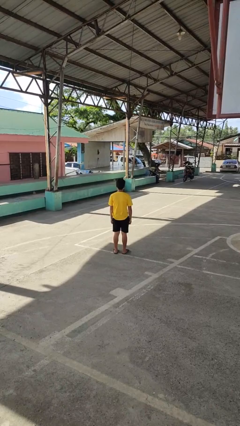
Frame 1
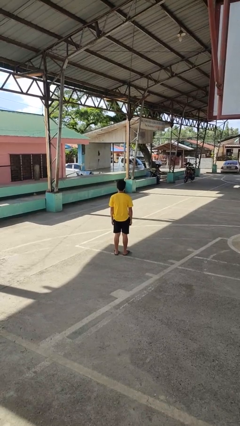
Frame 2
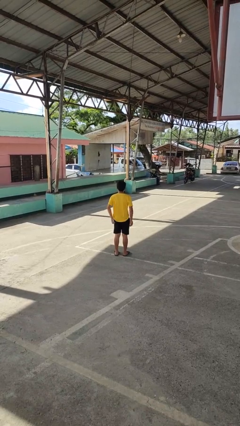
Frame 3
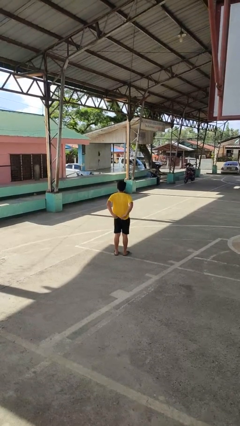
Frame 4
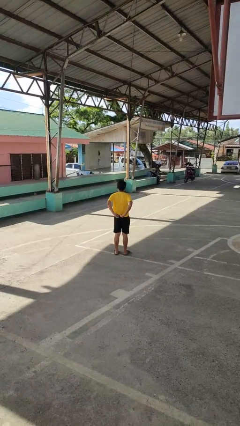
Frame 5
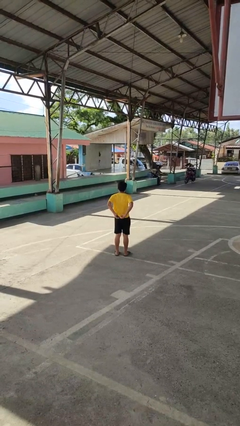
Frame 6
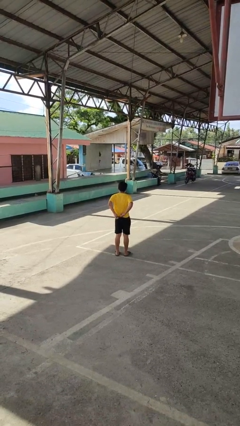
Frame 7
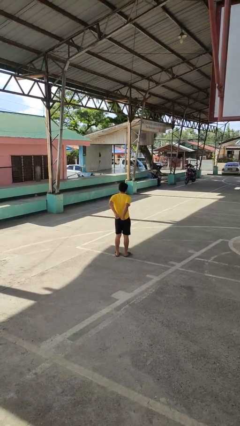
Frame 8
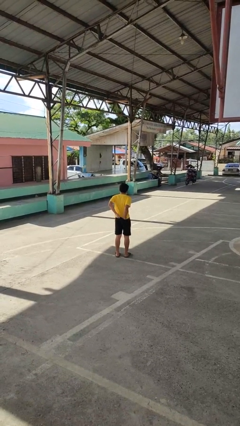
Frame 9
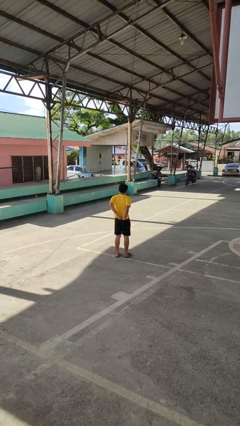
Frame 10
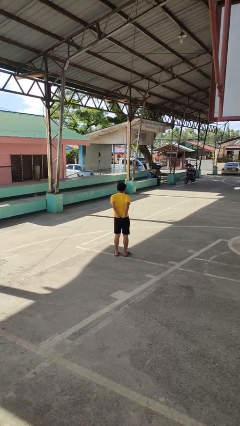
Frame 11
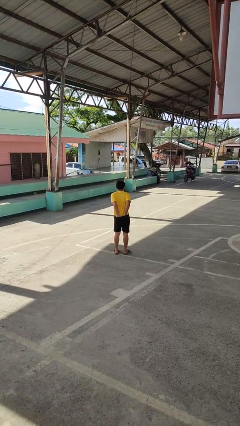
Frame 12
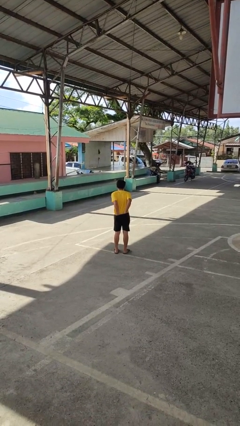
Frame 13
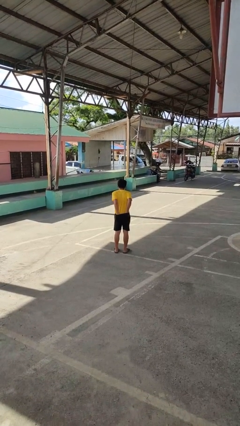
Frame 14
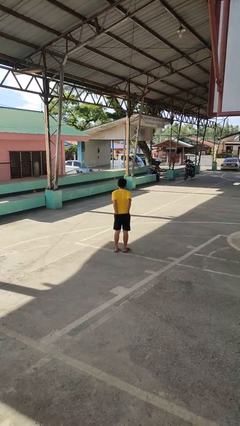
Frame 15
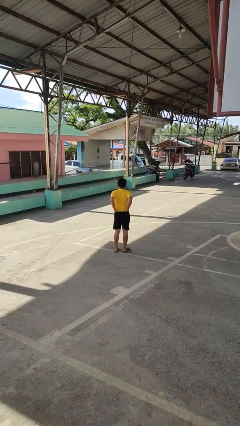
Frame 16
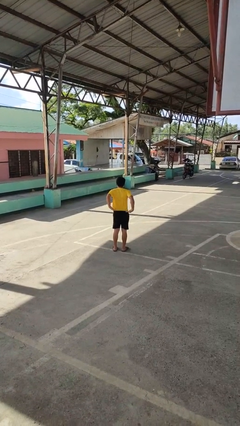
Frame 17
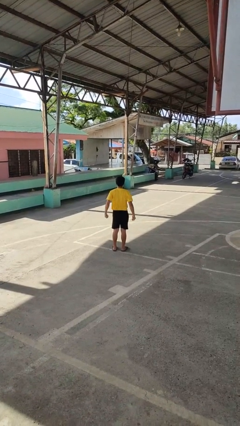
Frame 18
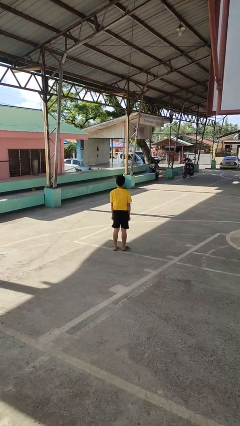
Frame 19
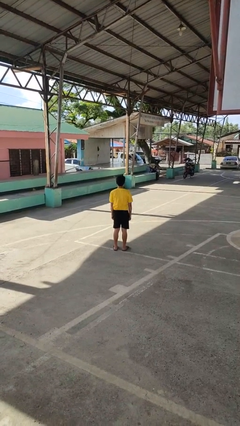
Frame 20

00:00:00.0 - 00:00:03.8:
person tucks in shirt

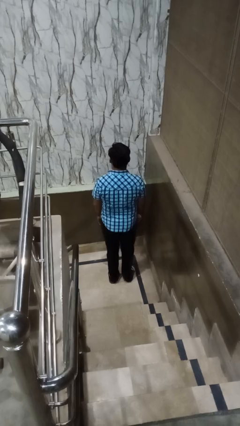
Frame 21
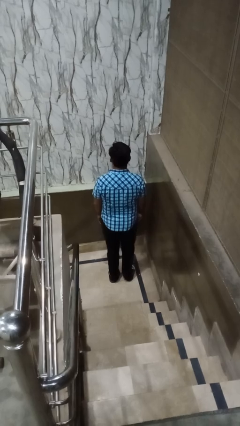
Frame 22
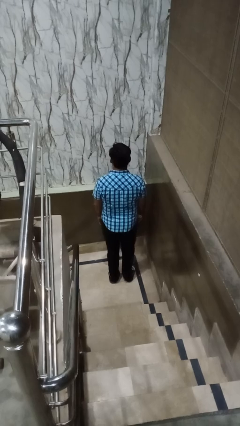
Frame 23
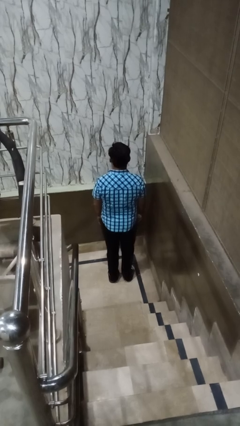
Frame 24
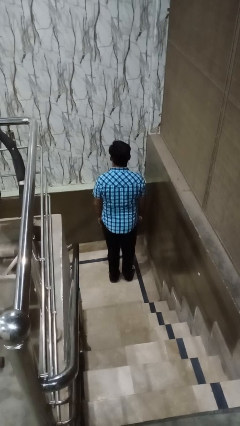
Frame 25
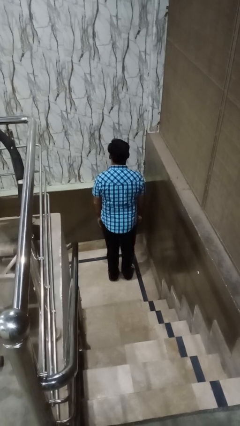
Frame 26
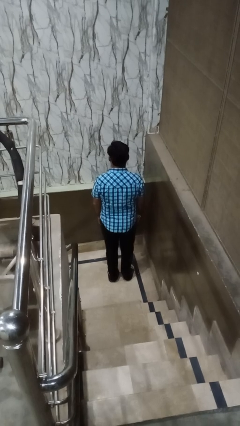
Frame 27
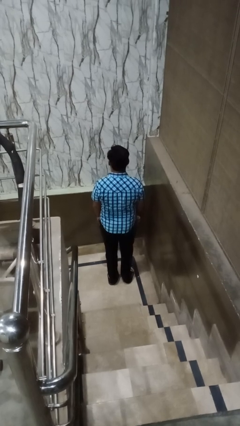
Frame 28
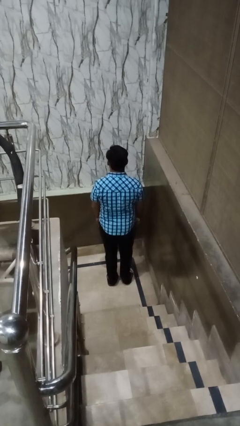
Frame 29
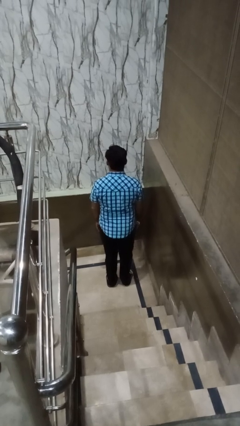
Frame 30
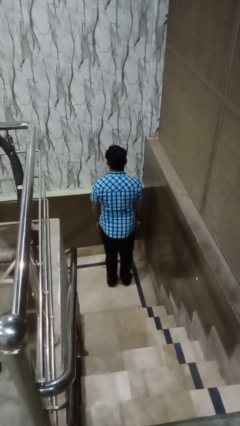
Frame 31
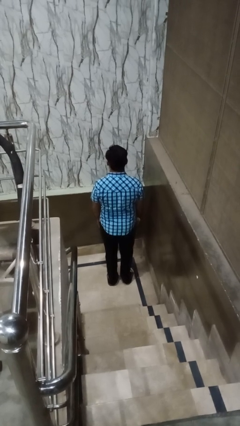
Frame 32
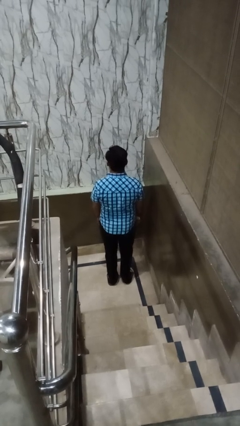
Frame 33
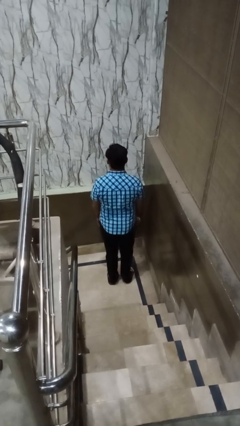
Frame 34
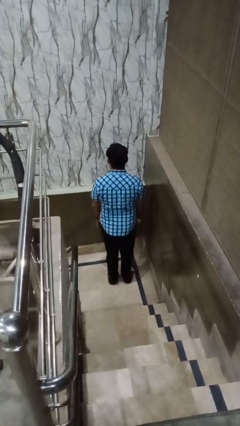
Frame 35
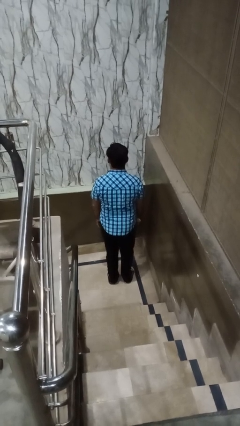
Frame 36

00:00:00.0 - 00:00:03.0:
person wiggles hips

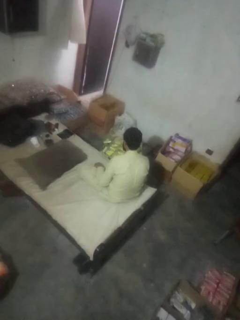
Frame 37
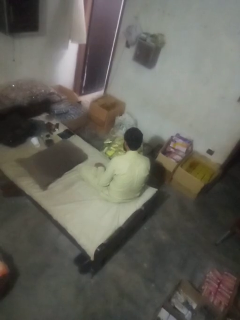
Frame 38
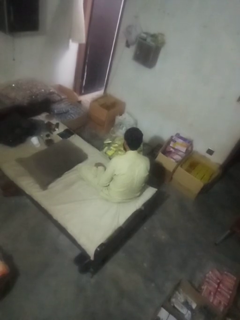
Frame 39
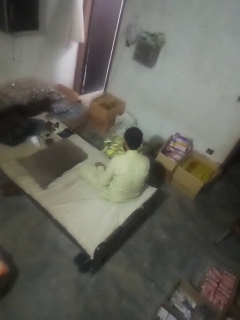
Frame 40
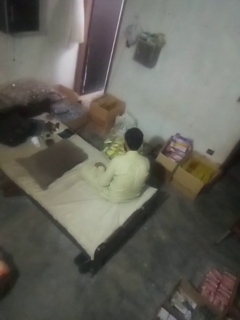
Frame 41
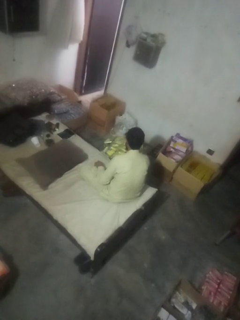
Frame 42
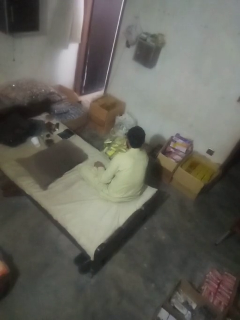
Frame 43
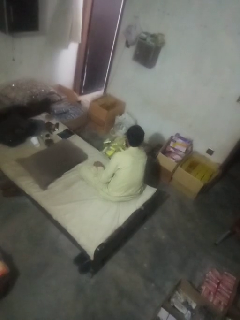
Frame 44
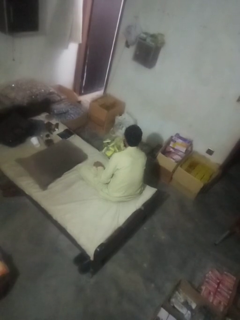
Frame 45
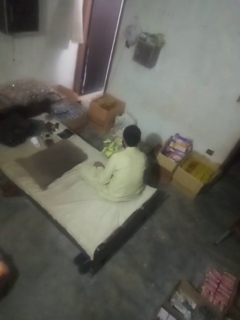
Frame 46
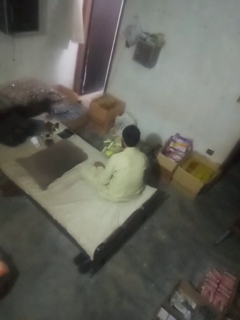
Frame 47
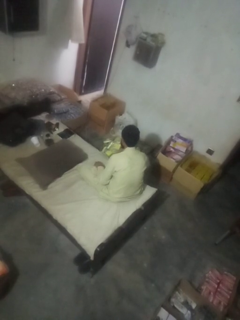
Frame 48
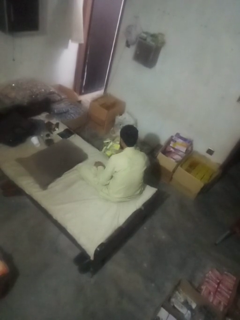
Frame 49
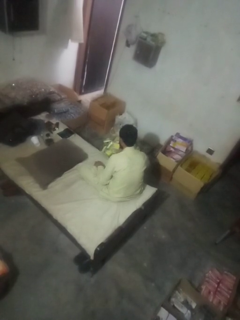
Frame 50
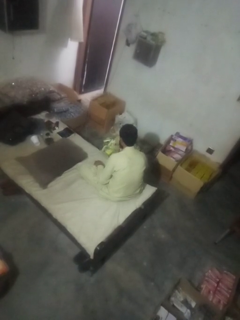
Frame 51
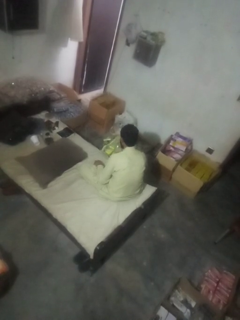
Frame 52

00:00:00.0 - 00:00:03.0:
person searches in box

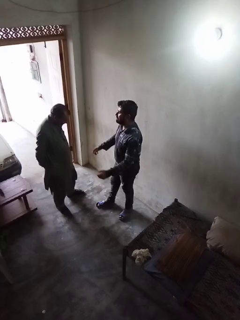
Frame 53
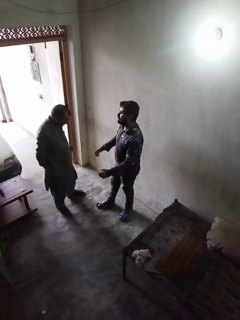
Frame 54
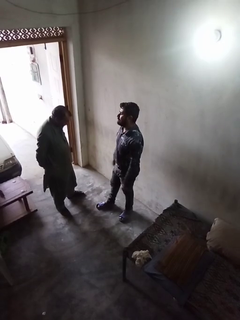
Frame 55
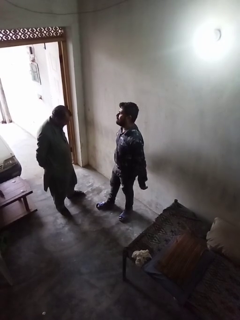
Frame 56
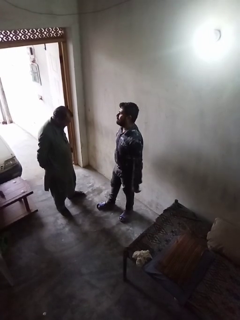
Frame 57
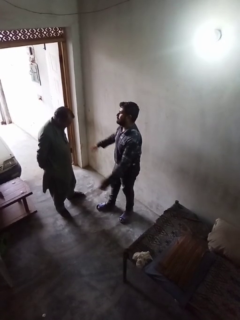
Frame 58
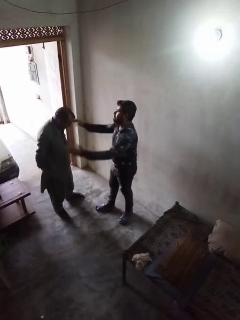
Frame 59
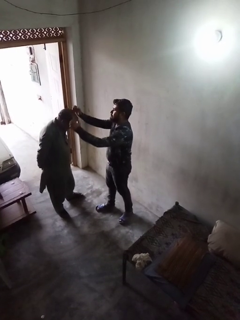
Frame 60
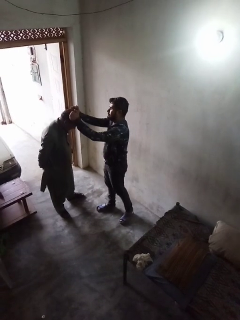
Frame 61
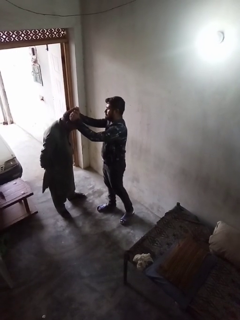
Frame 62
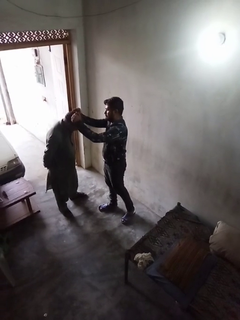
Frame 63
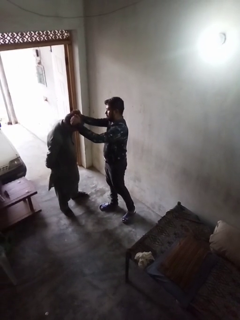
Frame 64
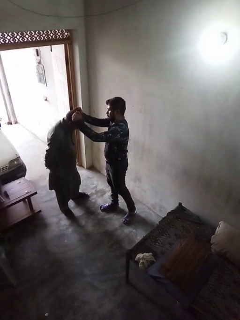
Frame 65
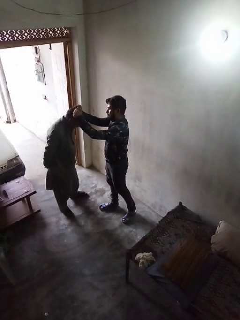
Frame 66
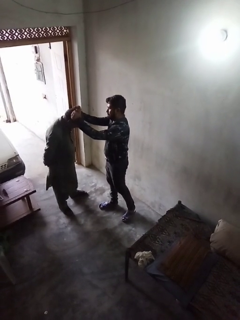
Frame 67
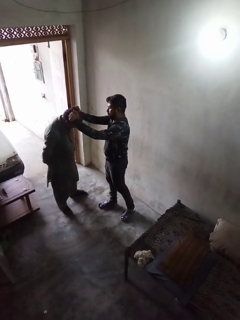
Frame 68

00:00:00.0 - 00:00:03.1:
person grabs person by hair

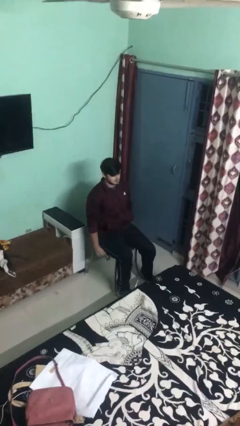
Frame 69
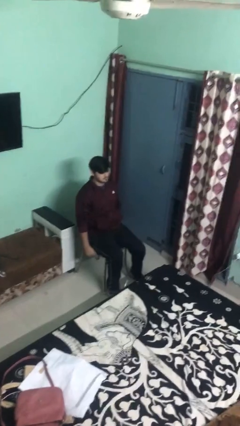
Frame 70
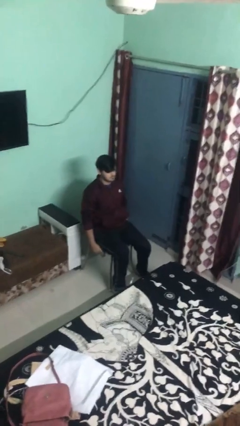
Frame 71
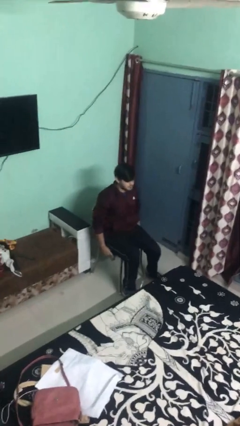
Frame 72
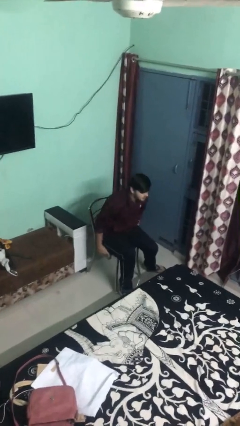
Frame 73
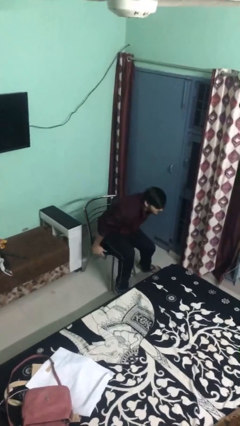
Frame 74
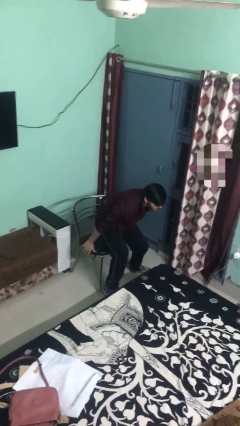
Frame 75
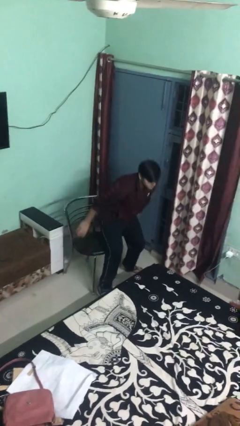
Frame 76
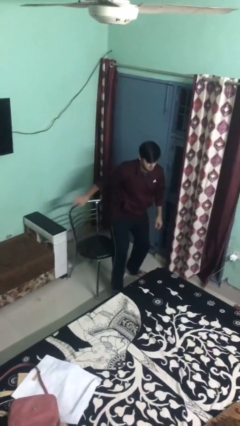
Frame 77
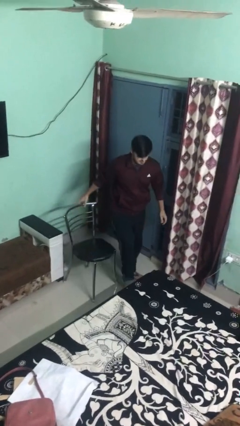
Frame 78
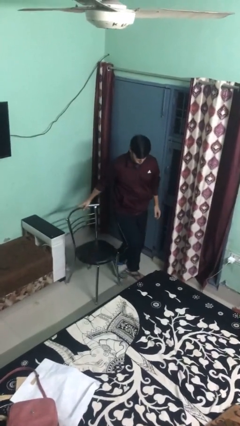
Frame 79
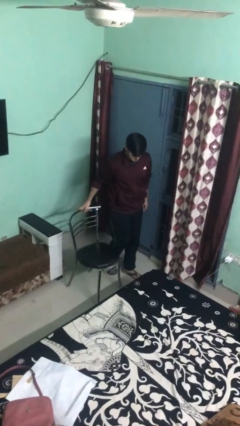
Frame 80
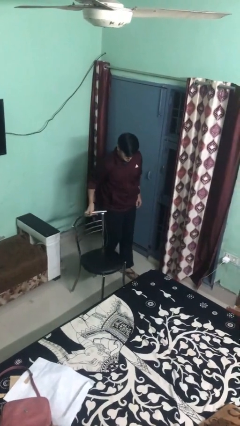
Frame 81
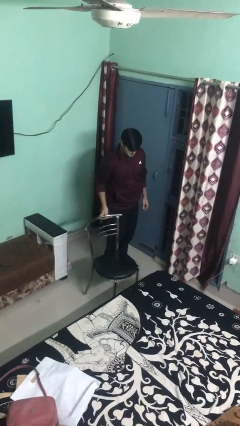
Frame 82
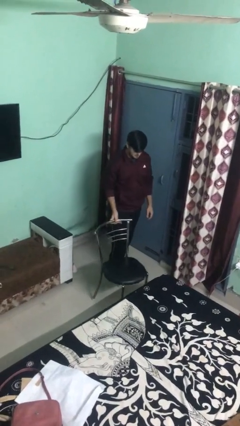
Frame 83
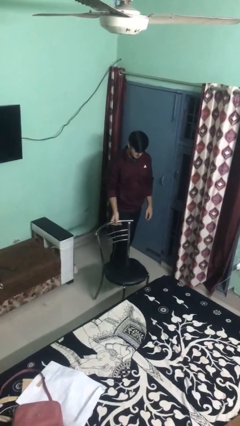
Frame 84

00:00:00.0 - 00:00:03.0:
person stands up

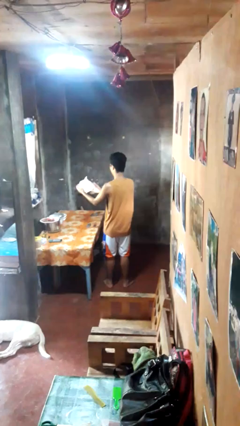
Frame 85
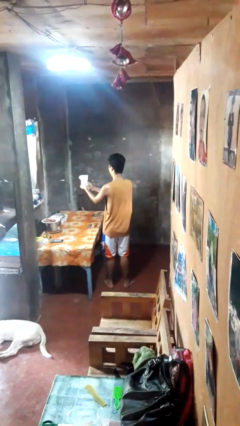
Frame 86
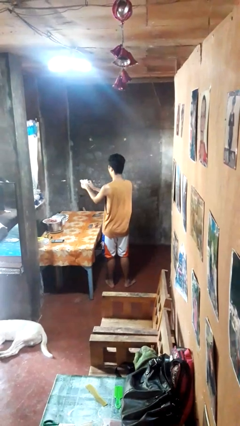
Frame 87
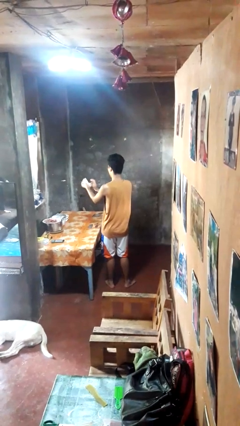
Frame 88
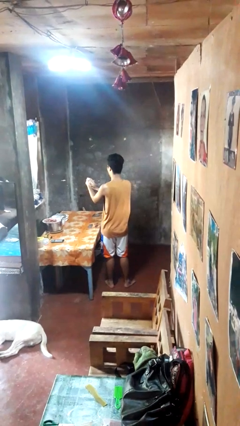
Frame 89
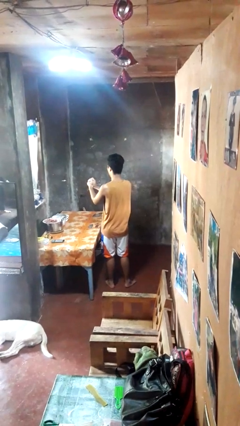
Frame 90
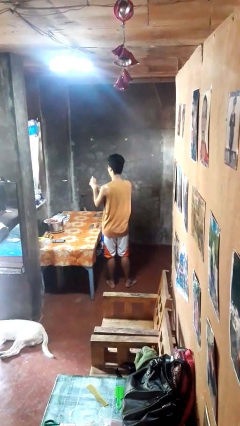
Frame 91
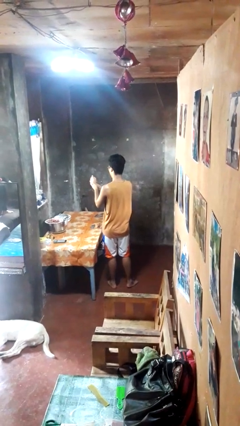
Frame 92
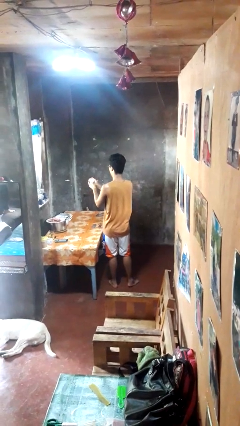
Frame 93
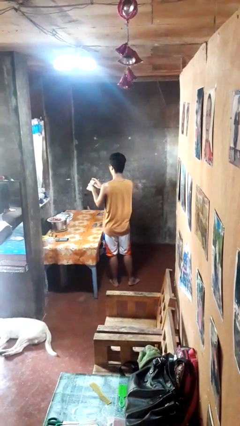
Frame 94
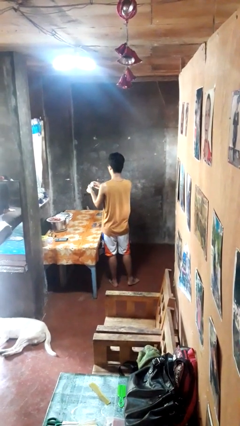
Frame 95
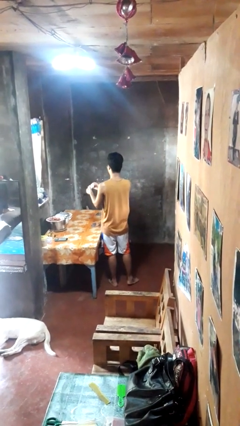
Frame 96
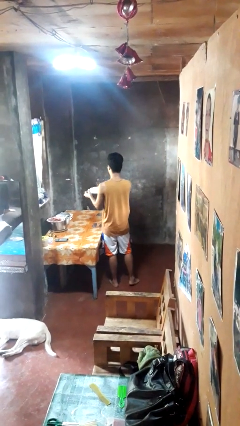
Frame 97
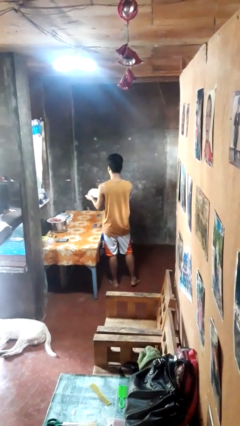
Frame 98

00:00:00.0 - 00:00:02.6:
person crumples paper

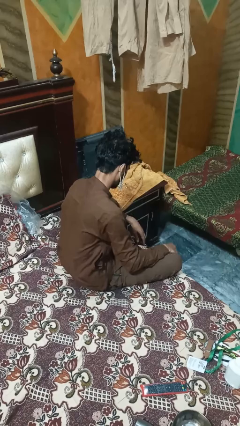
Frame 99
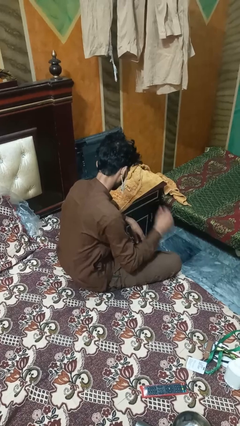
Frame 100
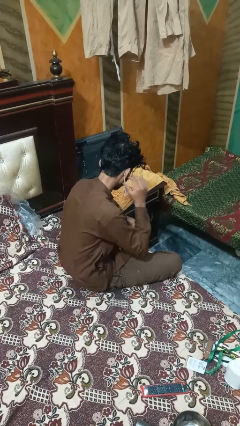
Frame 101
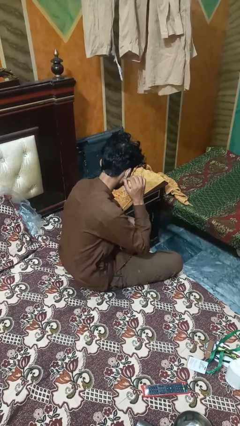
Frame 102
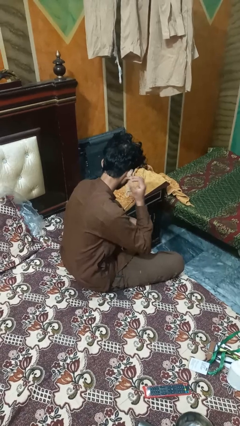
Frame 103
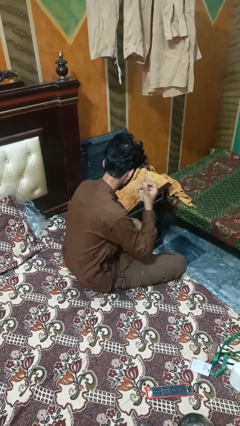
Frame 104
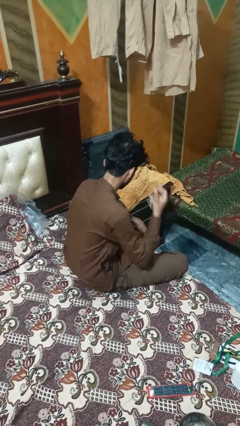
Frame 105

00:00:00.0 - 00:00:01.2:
person takes off earrings
